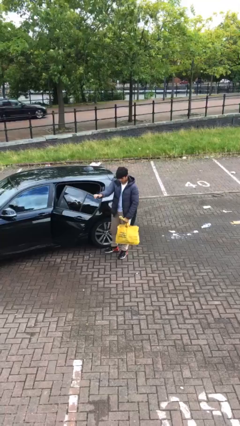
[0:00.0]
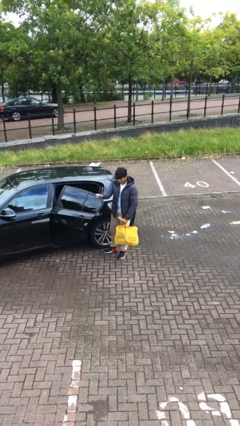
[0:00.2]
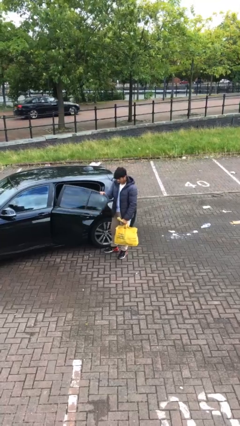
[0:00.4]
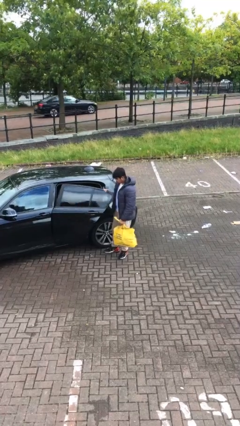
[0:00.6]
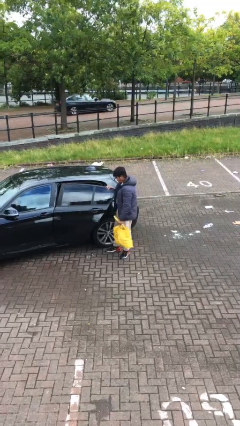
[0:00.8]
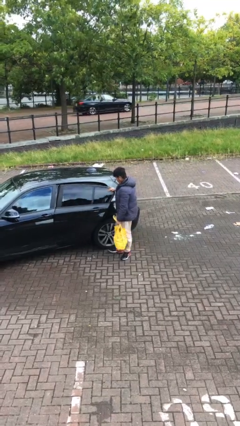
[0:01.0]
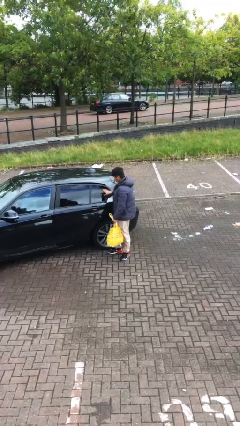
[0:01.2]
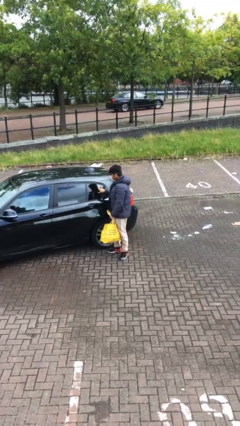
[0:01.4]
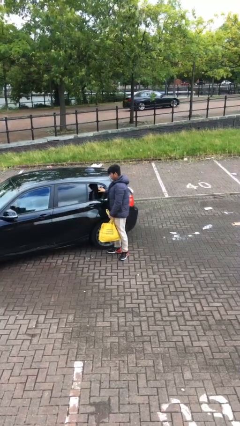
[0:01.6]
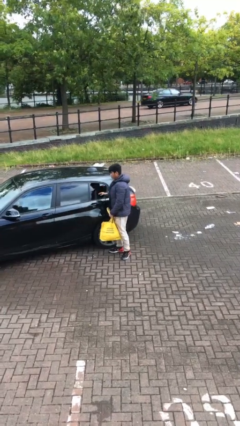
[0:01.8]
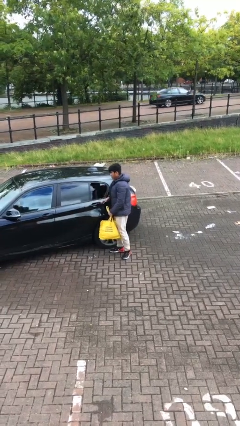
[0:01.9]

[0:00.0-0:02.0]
person closes car door

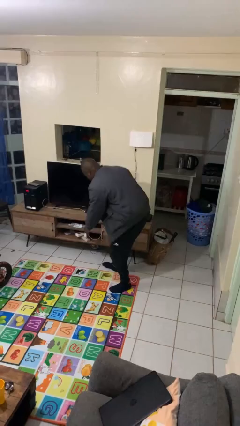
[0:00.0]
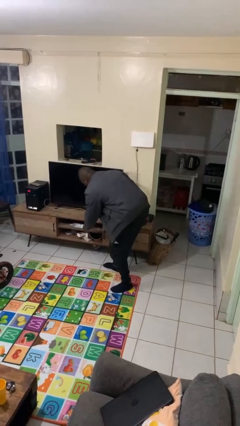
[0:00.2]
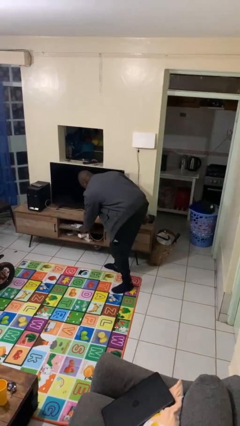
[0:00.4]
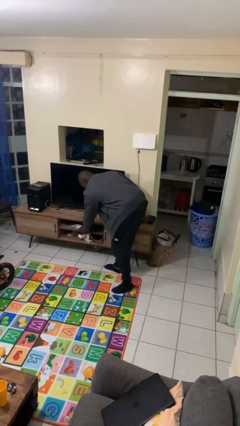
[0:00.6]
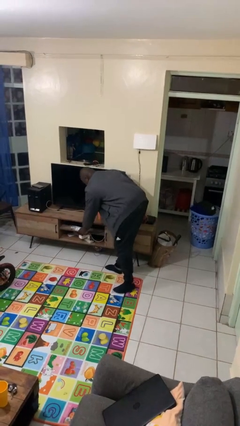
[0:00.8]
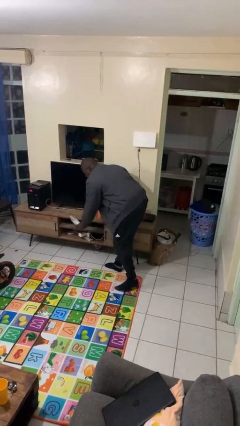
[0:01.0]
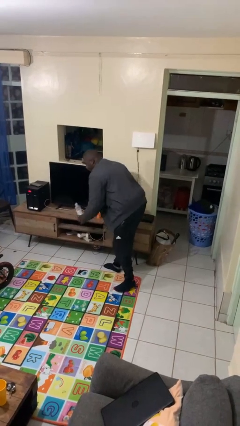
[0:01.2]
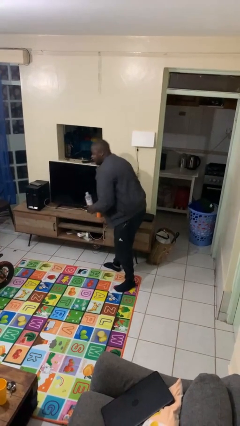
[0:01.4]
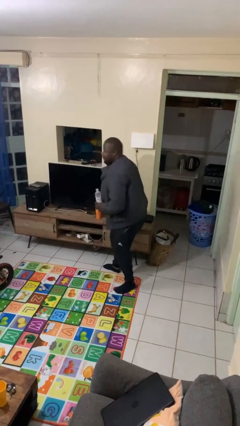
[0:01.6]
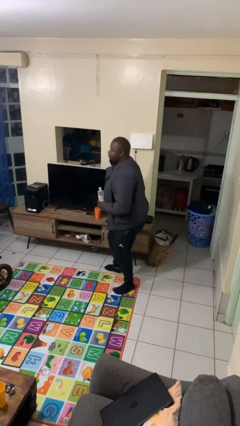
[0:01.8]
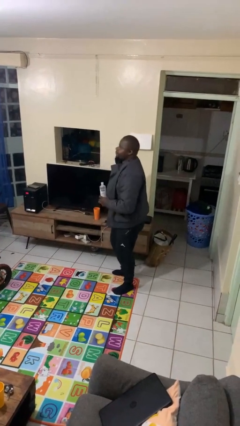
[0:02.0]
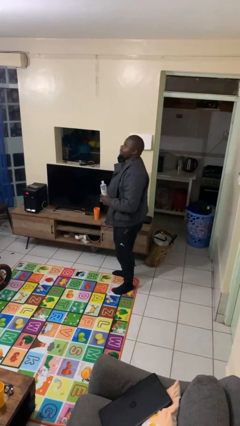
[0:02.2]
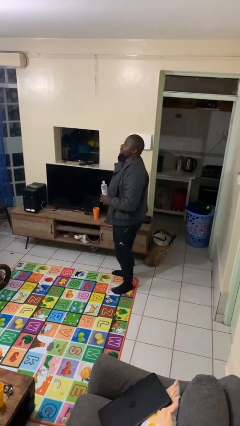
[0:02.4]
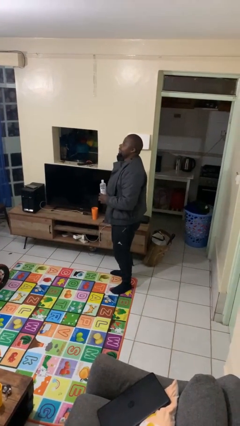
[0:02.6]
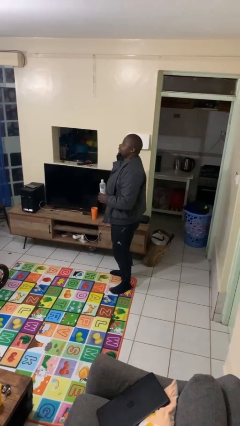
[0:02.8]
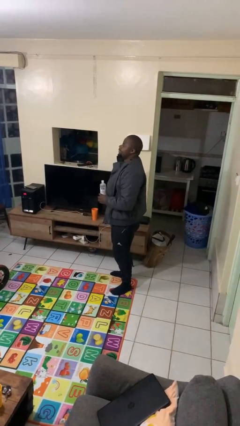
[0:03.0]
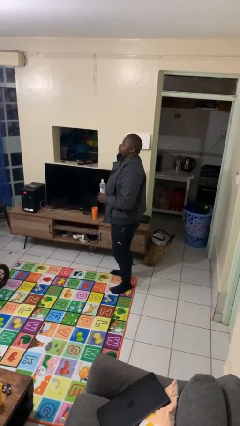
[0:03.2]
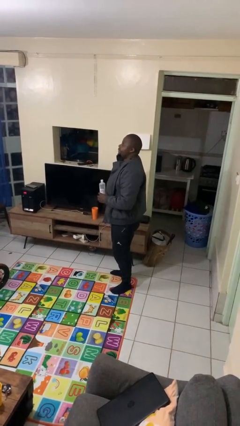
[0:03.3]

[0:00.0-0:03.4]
person picks up object from cabinet

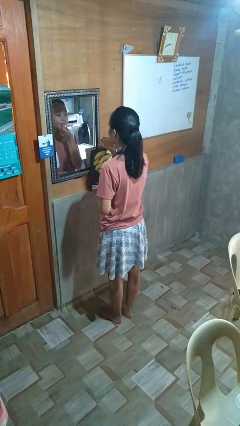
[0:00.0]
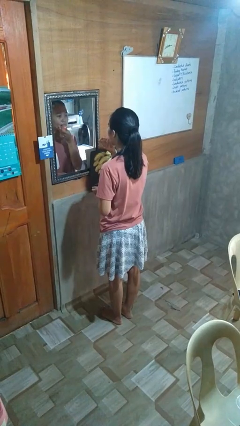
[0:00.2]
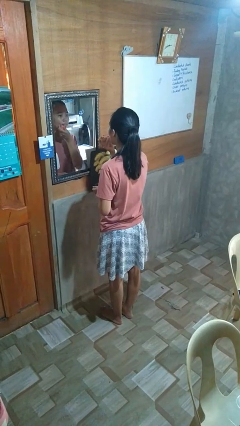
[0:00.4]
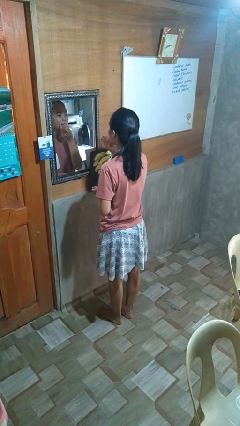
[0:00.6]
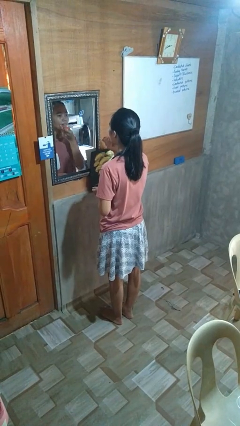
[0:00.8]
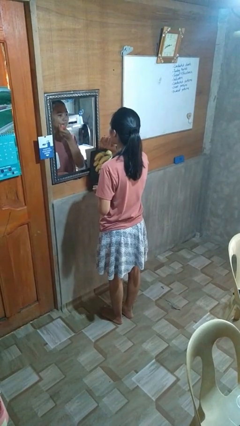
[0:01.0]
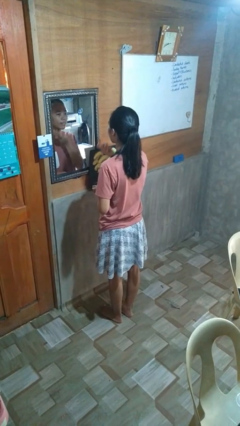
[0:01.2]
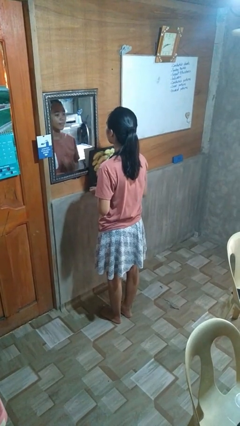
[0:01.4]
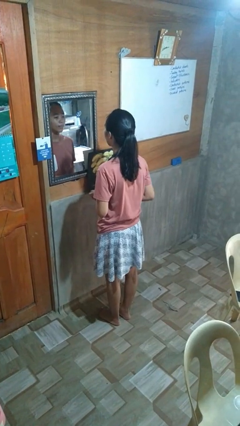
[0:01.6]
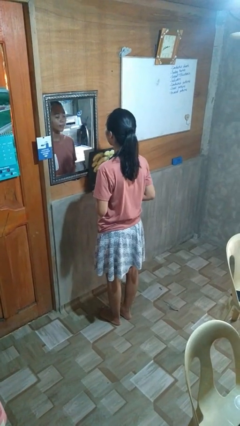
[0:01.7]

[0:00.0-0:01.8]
person applies lip makeup

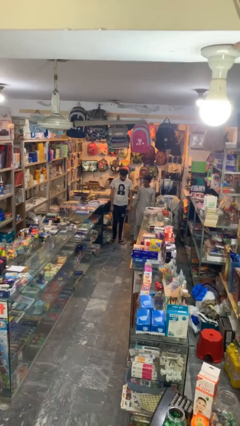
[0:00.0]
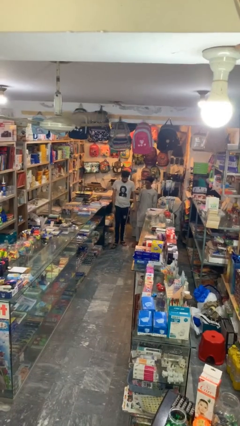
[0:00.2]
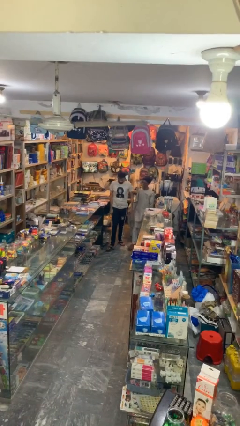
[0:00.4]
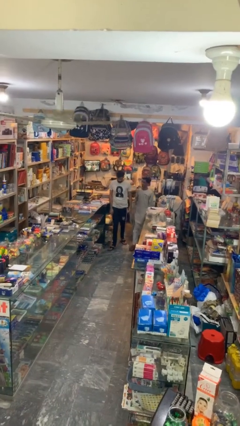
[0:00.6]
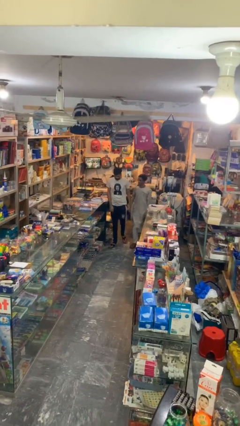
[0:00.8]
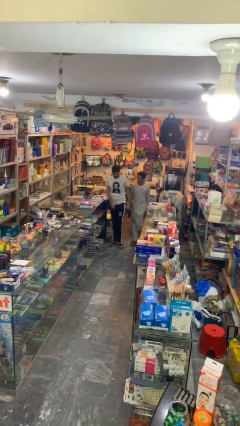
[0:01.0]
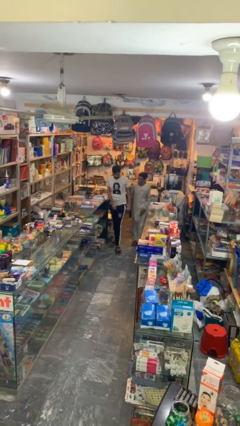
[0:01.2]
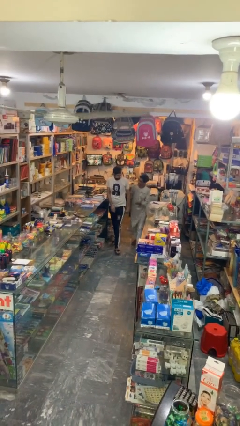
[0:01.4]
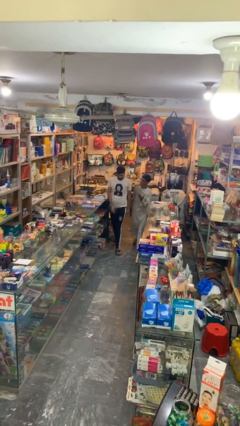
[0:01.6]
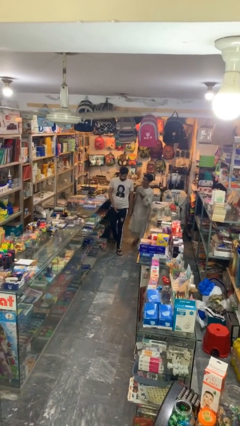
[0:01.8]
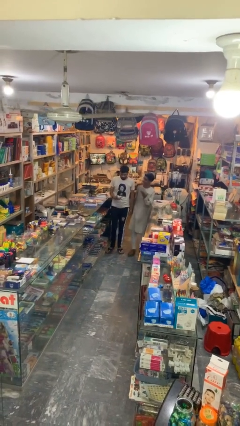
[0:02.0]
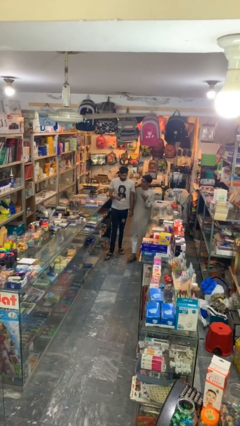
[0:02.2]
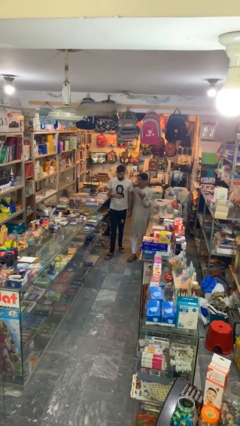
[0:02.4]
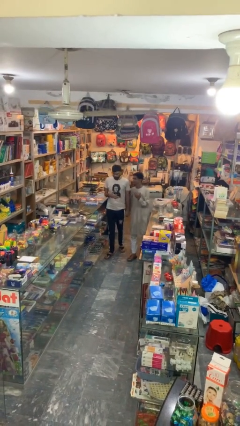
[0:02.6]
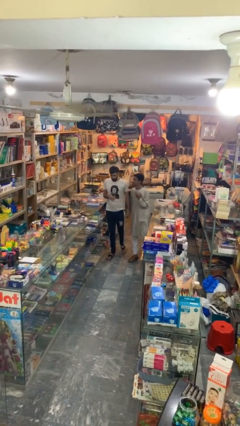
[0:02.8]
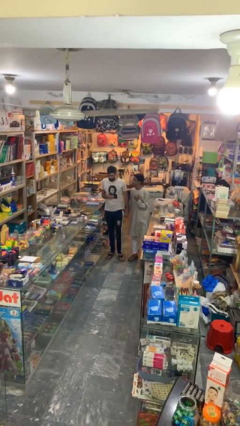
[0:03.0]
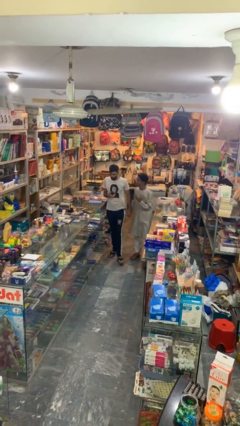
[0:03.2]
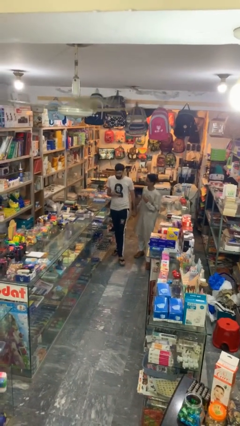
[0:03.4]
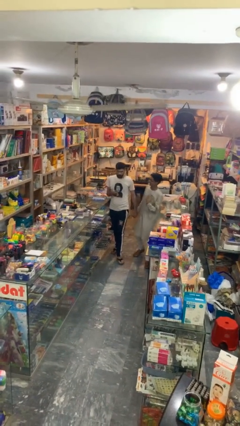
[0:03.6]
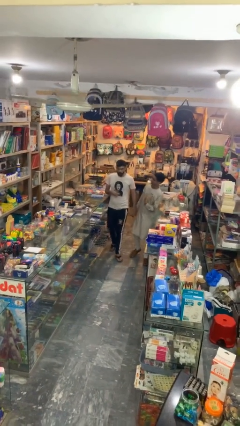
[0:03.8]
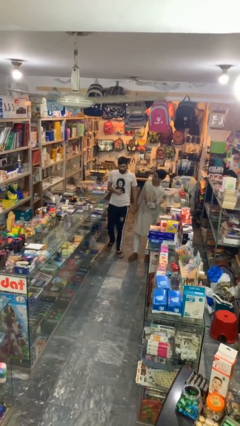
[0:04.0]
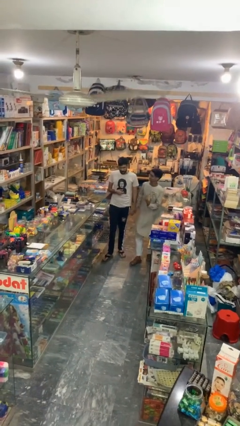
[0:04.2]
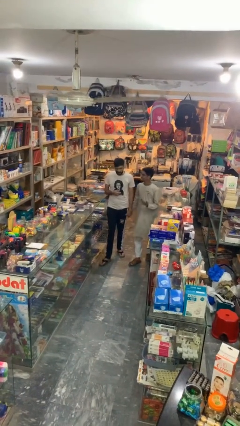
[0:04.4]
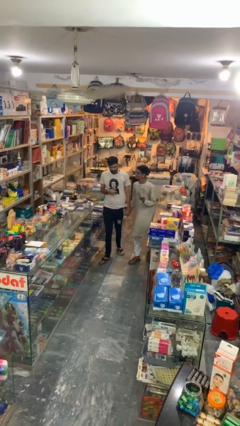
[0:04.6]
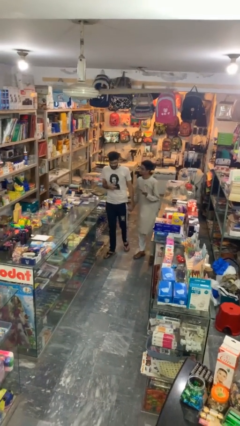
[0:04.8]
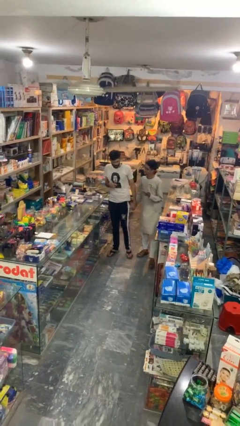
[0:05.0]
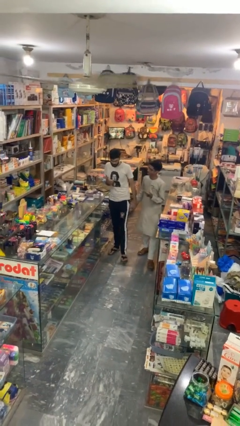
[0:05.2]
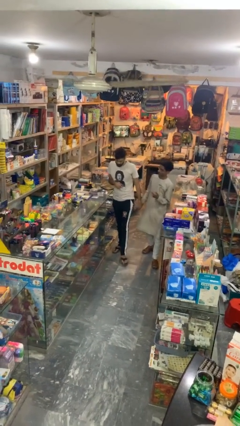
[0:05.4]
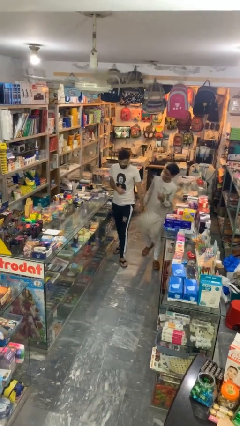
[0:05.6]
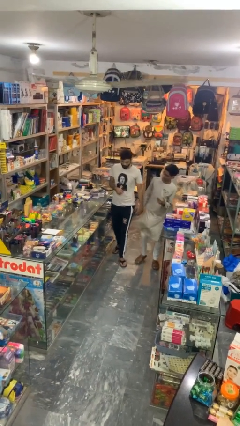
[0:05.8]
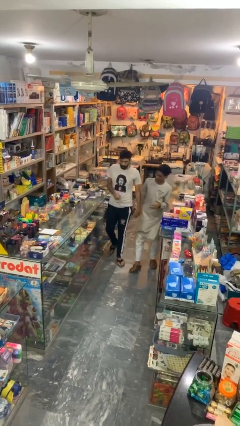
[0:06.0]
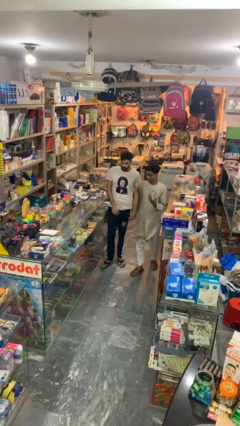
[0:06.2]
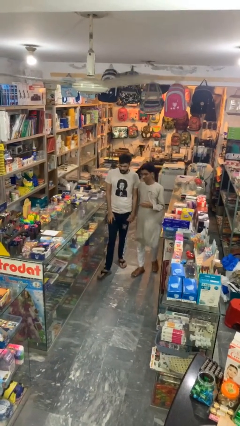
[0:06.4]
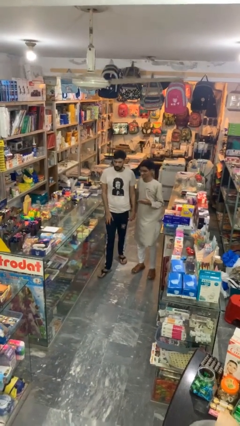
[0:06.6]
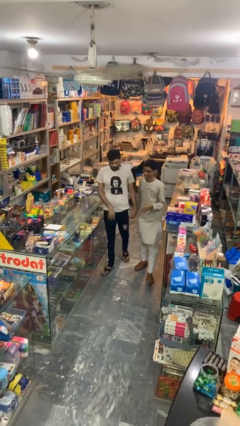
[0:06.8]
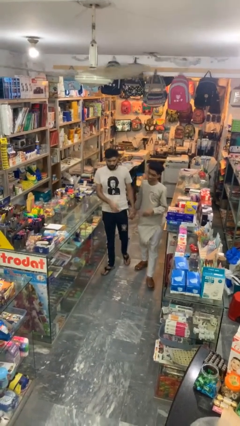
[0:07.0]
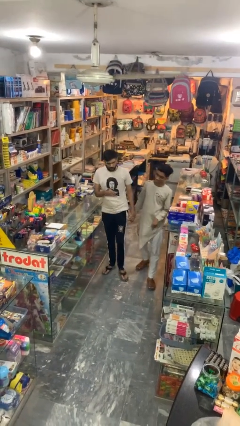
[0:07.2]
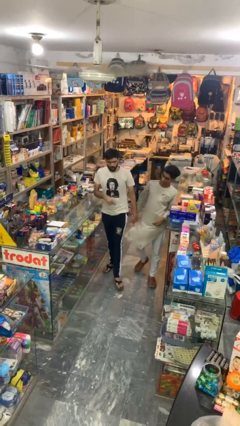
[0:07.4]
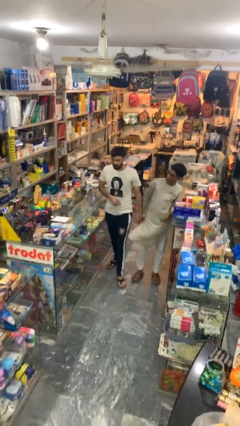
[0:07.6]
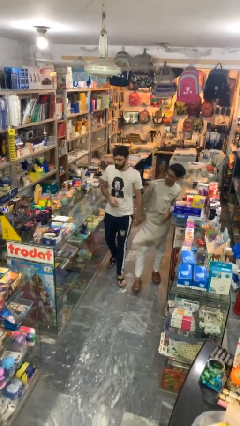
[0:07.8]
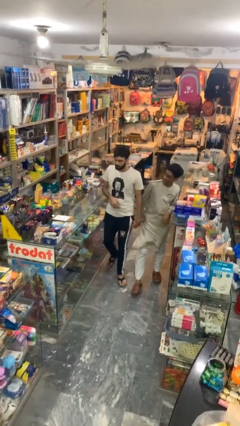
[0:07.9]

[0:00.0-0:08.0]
person holds hand

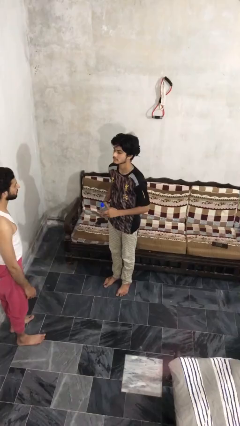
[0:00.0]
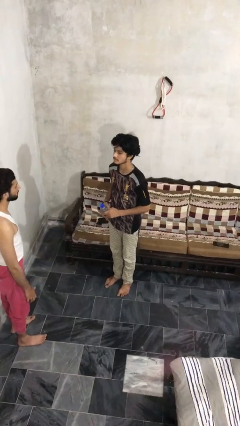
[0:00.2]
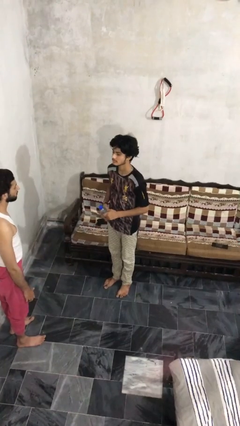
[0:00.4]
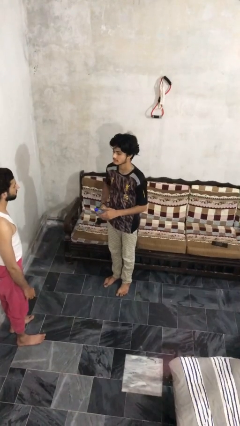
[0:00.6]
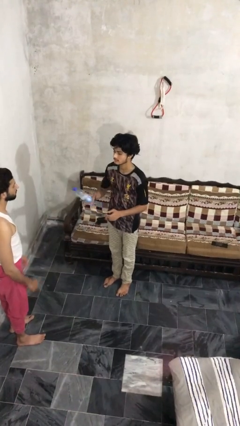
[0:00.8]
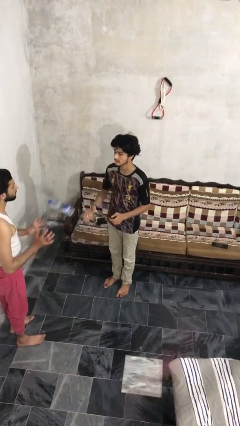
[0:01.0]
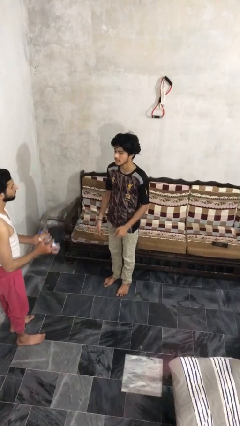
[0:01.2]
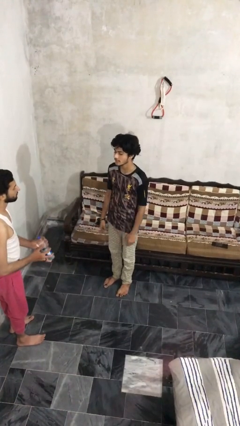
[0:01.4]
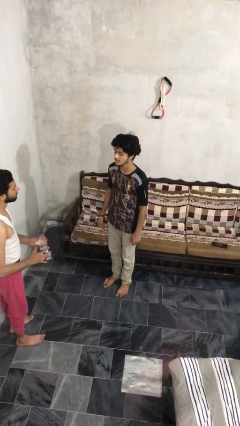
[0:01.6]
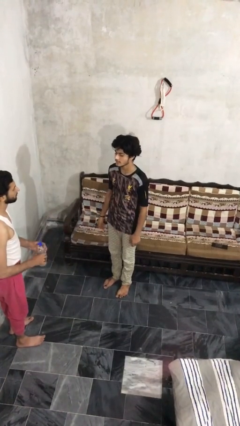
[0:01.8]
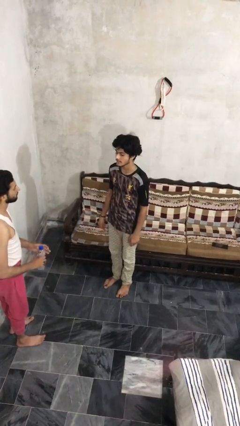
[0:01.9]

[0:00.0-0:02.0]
person throws object to person

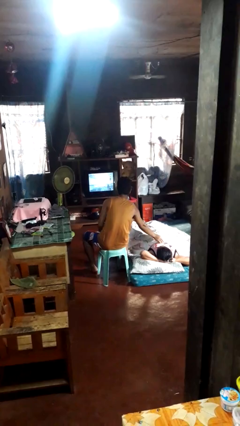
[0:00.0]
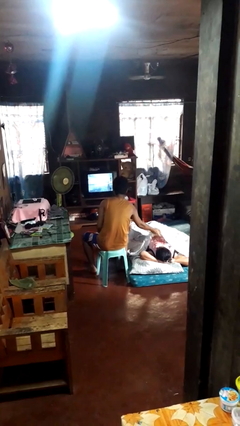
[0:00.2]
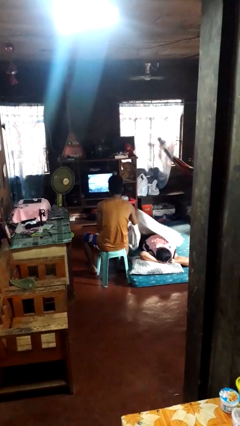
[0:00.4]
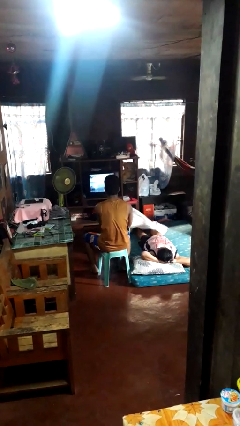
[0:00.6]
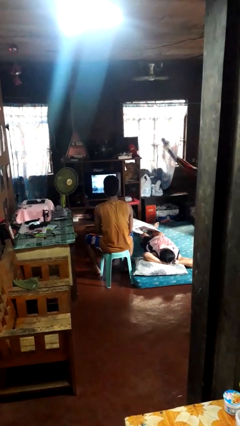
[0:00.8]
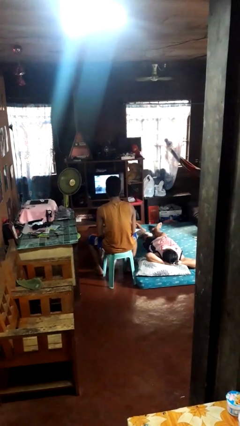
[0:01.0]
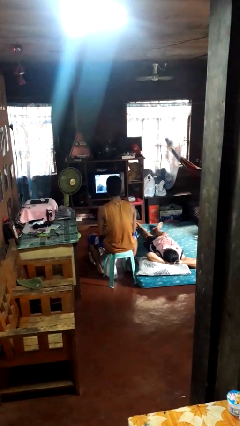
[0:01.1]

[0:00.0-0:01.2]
person uncovers friend with blanket
